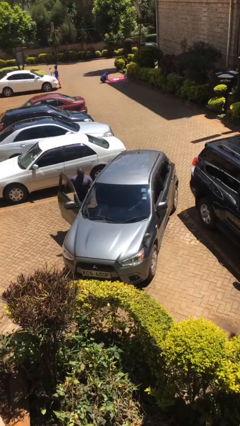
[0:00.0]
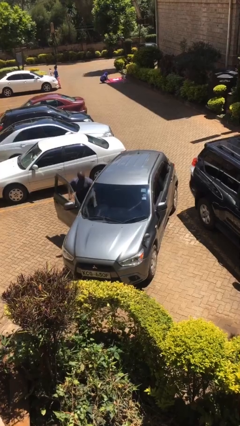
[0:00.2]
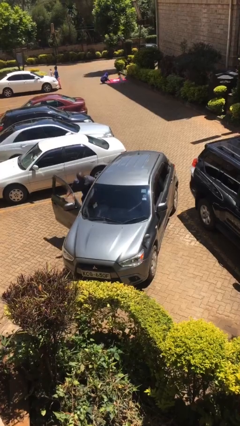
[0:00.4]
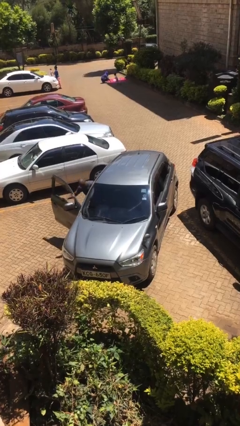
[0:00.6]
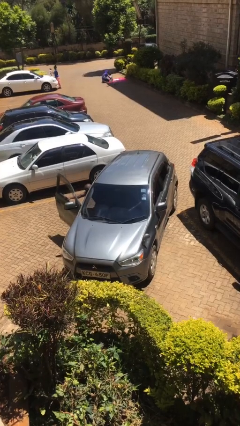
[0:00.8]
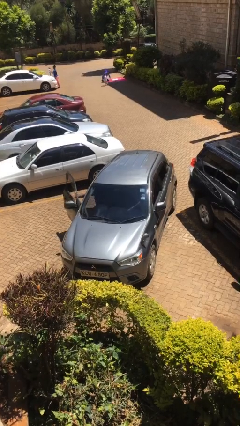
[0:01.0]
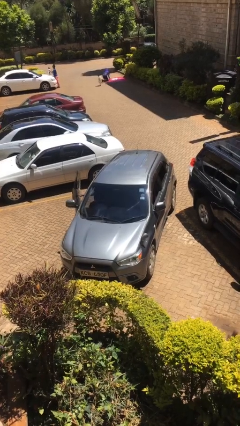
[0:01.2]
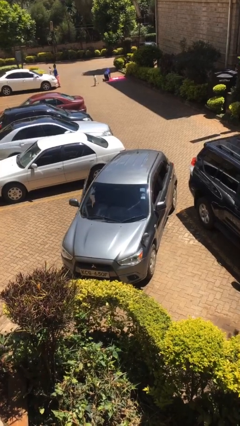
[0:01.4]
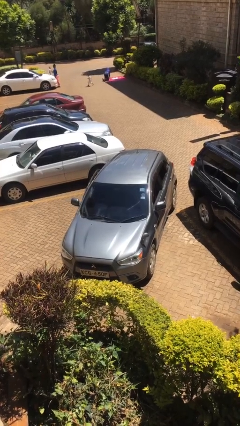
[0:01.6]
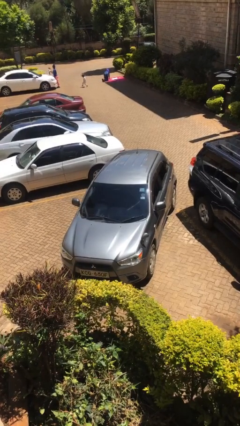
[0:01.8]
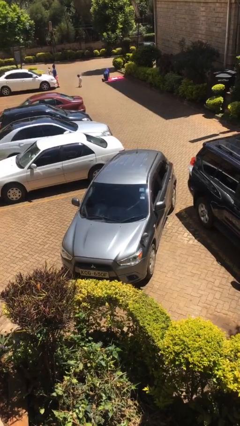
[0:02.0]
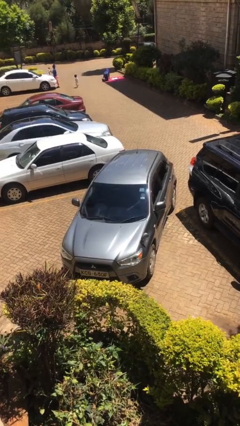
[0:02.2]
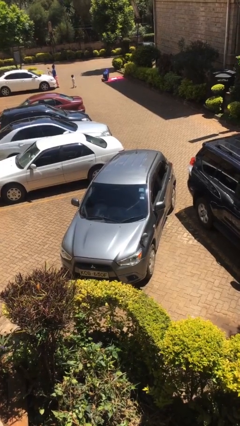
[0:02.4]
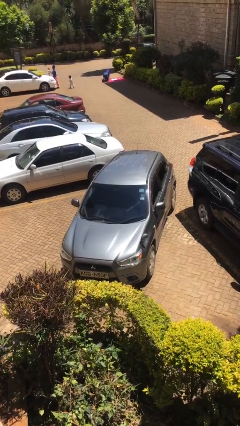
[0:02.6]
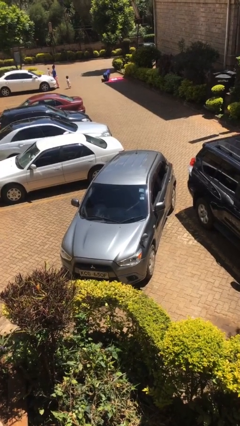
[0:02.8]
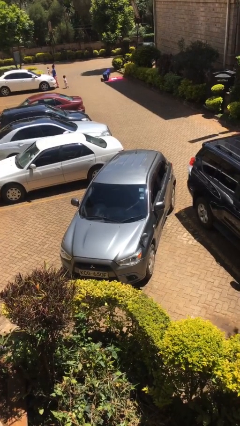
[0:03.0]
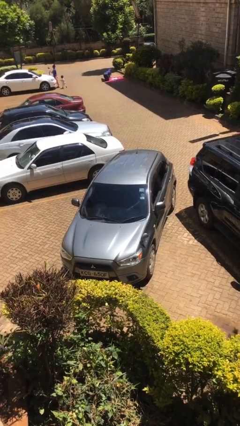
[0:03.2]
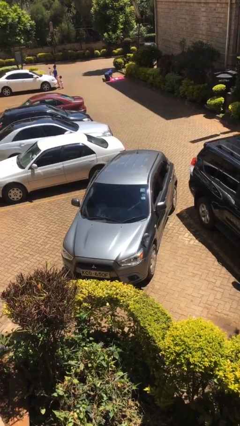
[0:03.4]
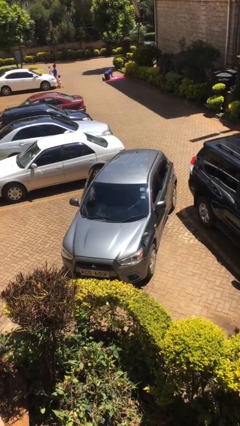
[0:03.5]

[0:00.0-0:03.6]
car picks up person

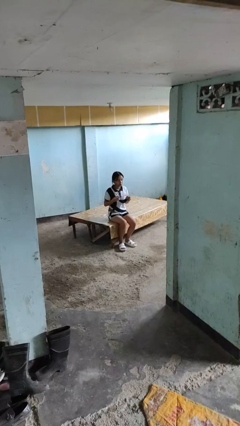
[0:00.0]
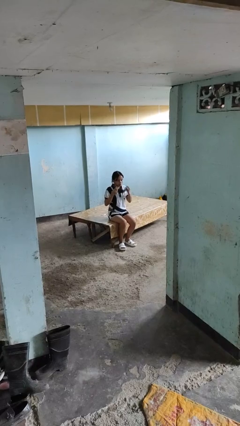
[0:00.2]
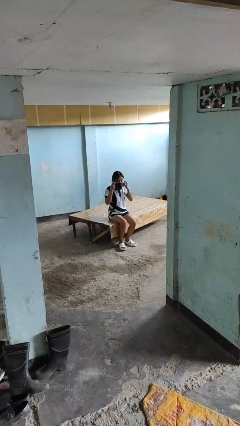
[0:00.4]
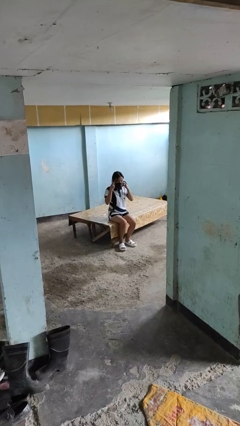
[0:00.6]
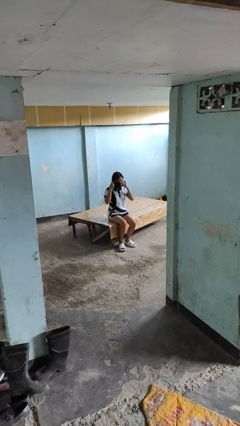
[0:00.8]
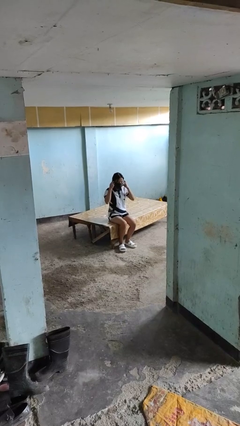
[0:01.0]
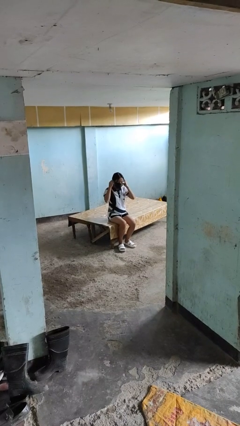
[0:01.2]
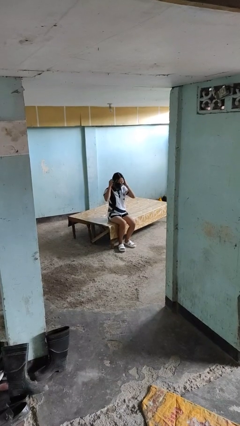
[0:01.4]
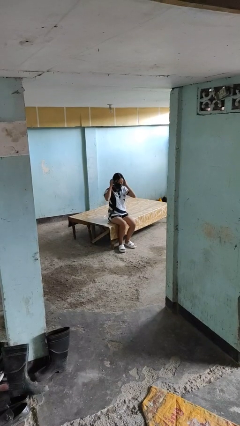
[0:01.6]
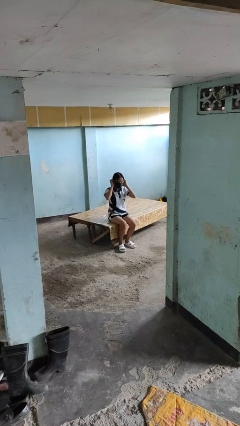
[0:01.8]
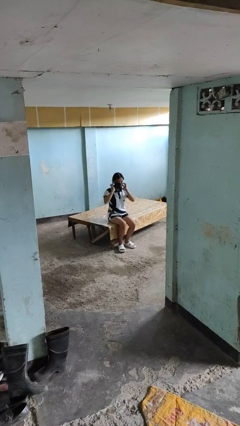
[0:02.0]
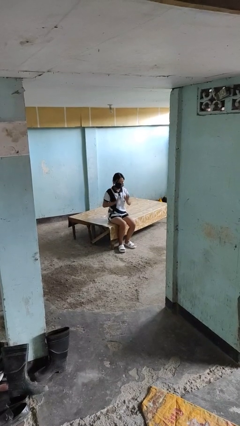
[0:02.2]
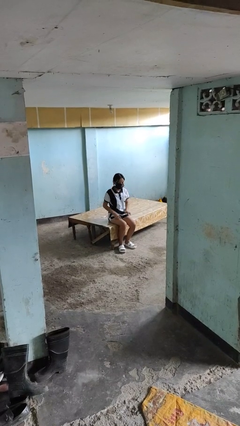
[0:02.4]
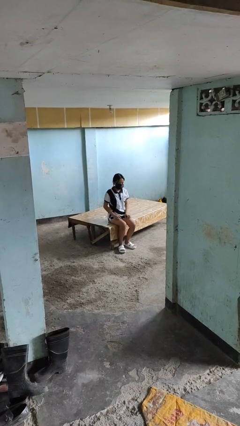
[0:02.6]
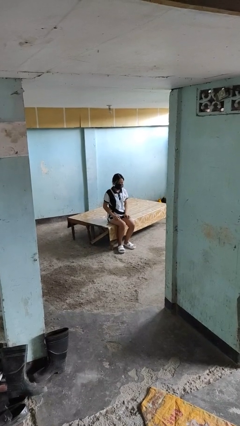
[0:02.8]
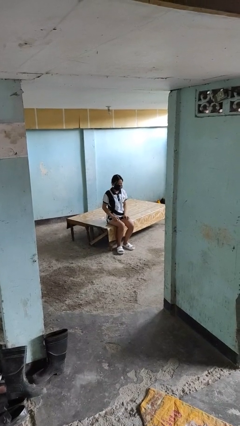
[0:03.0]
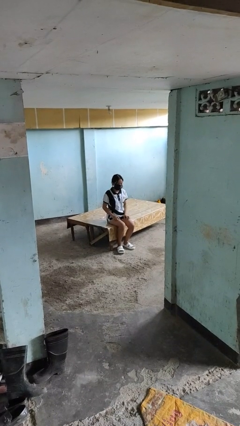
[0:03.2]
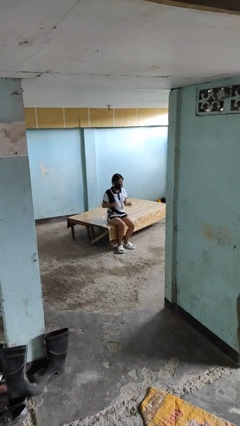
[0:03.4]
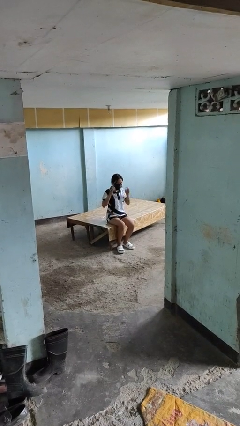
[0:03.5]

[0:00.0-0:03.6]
person puts on facemask

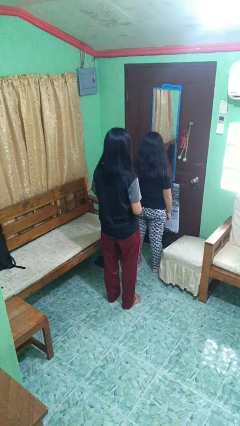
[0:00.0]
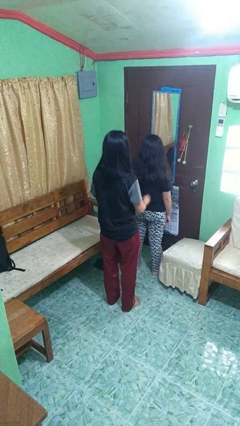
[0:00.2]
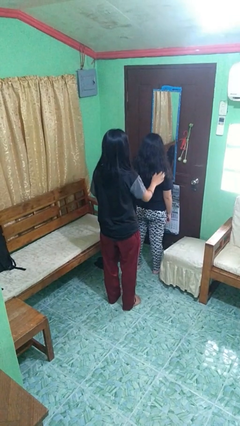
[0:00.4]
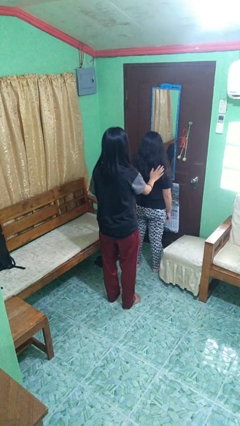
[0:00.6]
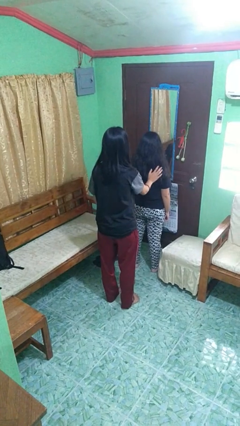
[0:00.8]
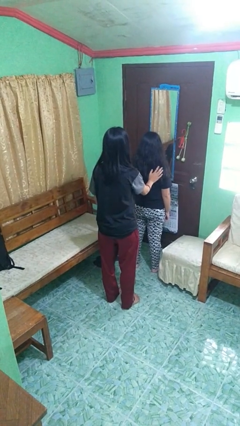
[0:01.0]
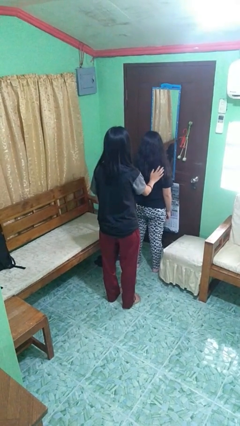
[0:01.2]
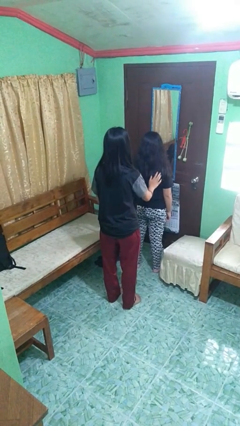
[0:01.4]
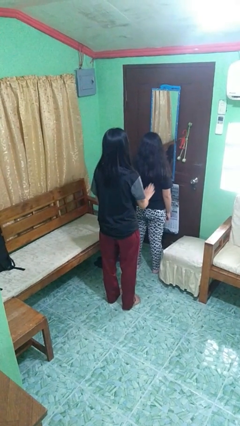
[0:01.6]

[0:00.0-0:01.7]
person touches back of person

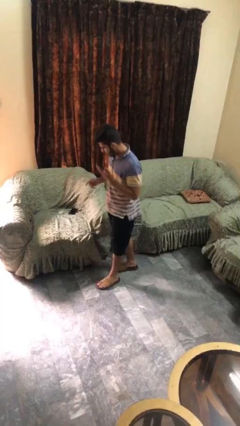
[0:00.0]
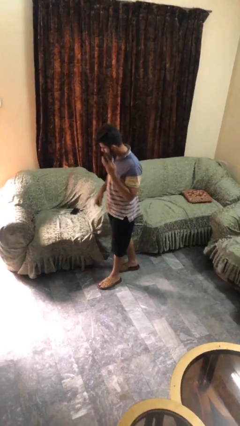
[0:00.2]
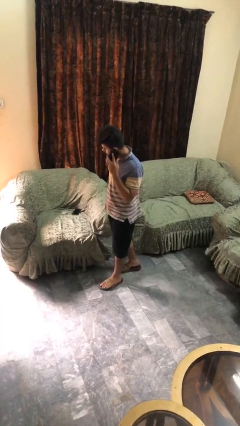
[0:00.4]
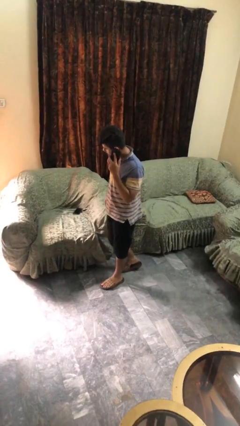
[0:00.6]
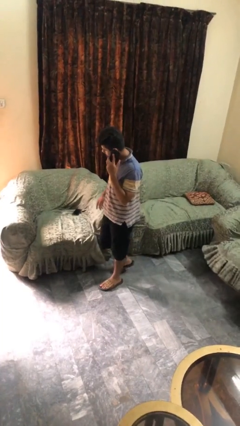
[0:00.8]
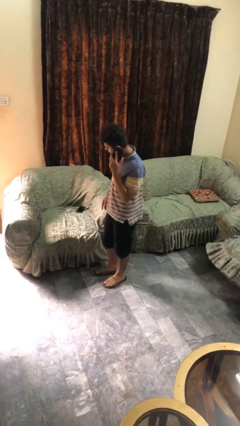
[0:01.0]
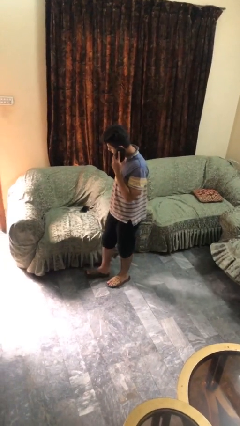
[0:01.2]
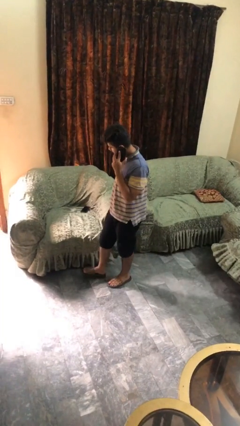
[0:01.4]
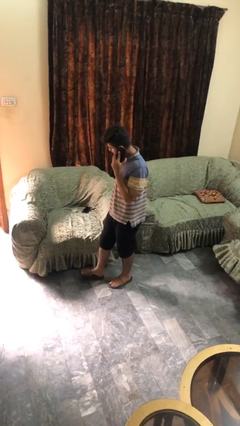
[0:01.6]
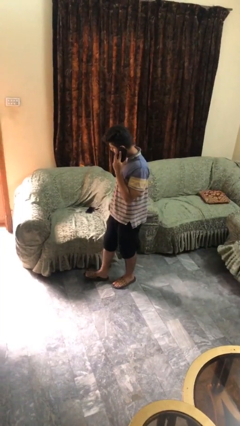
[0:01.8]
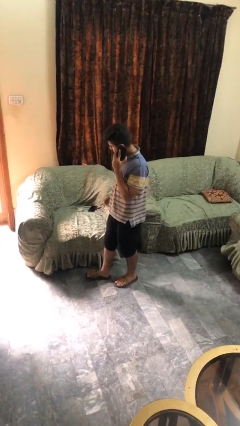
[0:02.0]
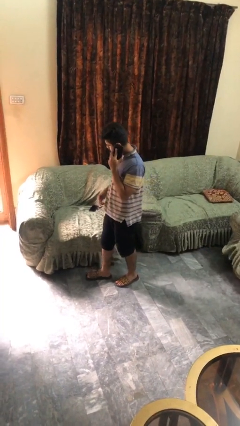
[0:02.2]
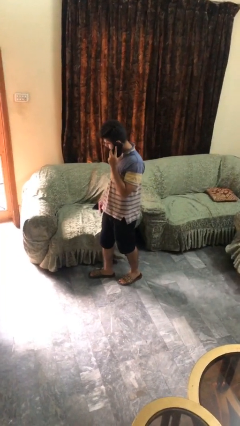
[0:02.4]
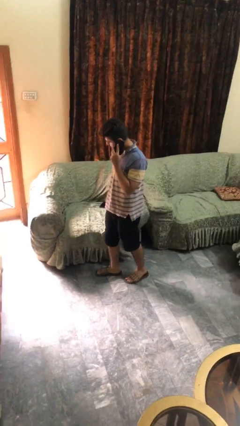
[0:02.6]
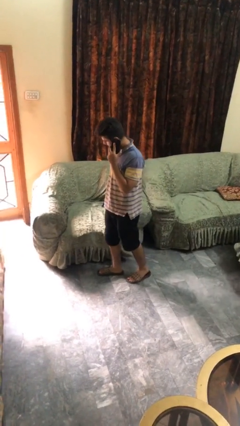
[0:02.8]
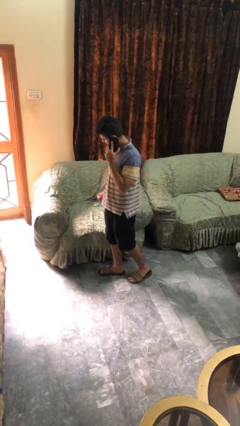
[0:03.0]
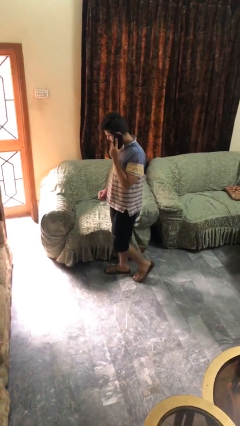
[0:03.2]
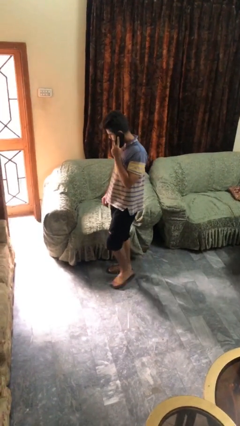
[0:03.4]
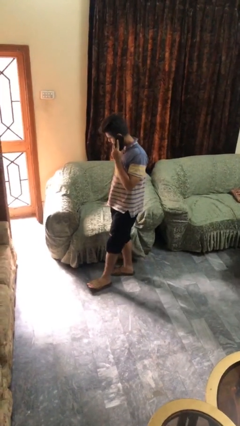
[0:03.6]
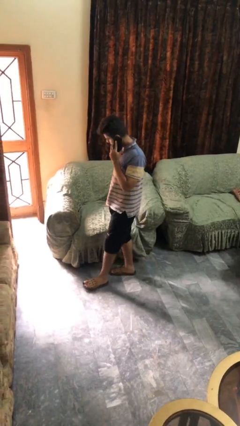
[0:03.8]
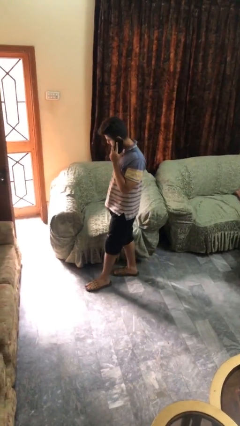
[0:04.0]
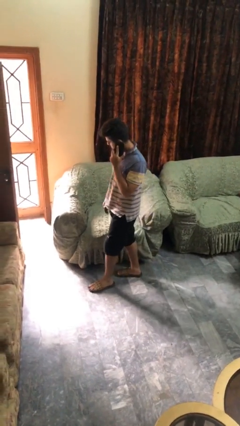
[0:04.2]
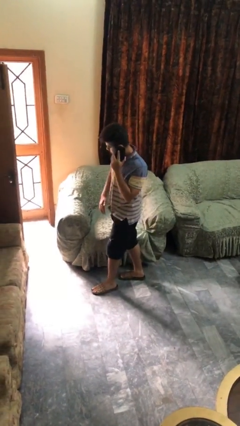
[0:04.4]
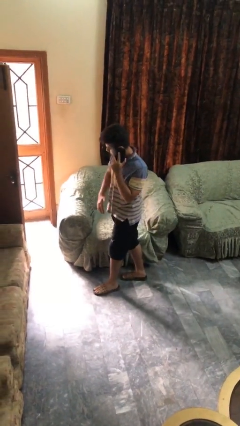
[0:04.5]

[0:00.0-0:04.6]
person talks on phone

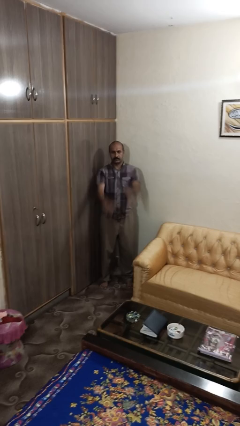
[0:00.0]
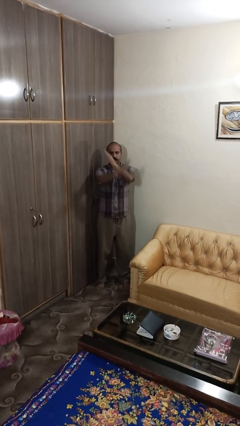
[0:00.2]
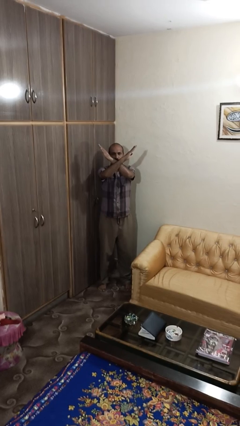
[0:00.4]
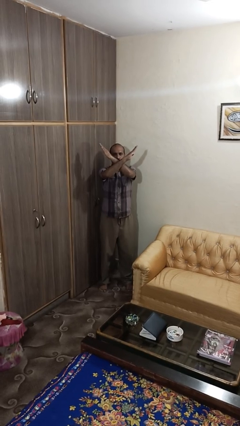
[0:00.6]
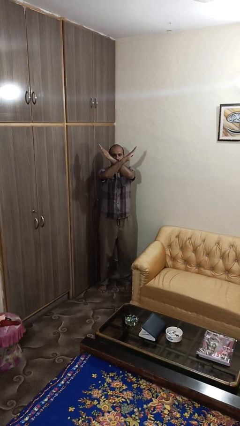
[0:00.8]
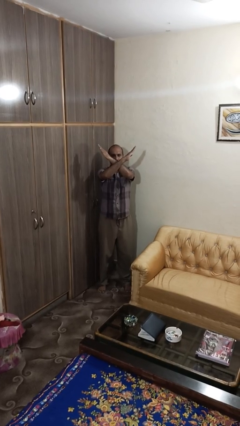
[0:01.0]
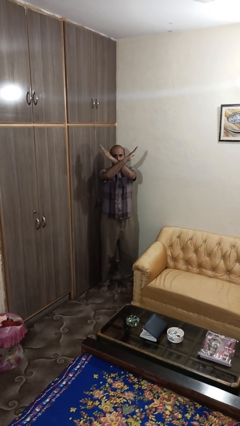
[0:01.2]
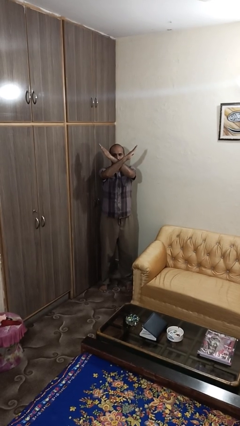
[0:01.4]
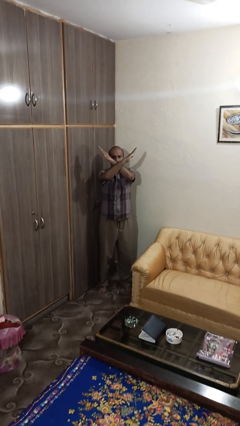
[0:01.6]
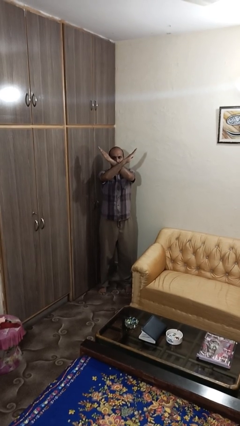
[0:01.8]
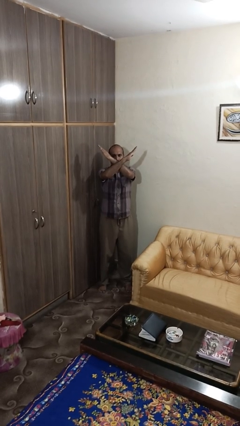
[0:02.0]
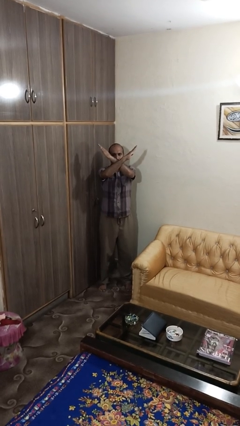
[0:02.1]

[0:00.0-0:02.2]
person gestures arms x

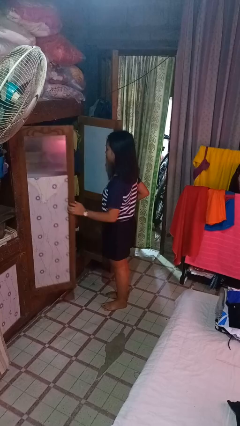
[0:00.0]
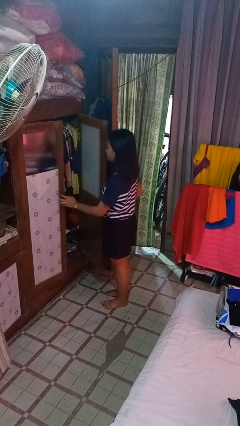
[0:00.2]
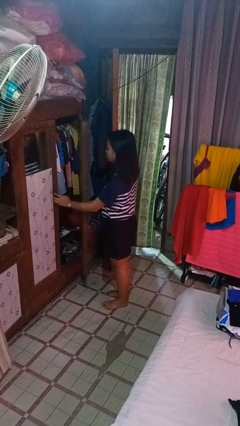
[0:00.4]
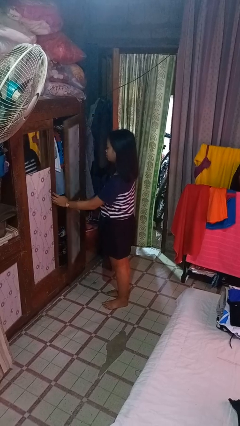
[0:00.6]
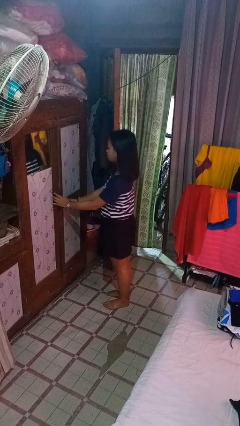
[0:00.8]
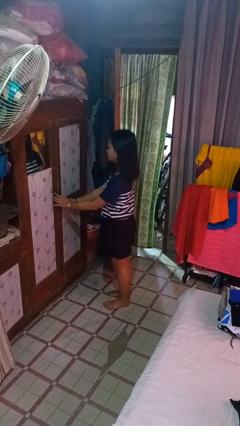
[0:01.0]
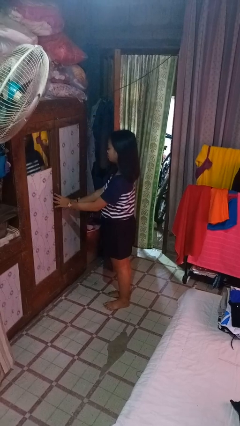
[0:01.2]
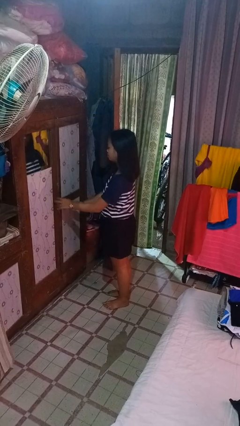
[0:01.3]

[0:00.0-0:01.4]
person closes closet door

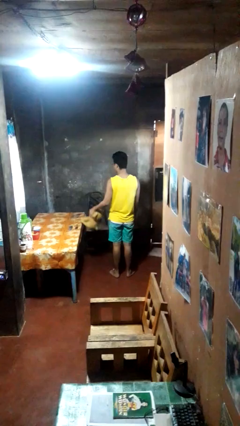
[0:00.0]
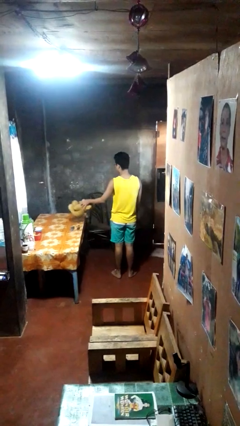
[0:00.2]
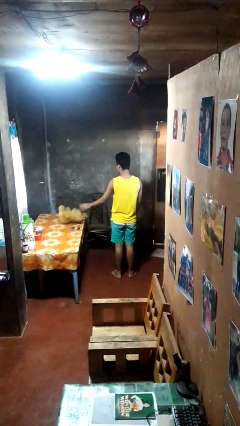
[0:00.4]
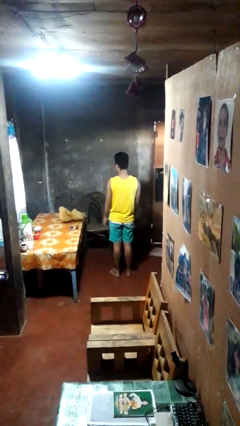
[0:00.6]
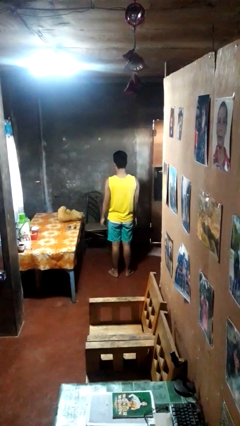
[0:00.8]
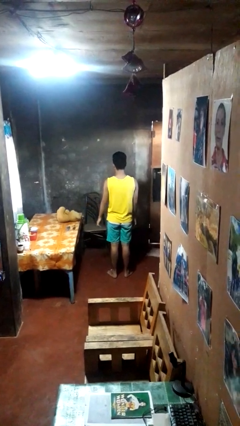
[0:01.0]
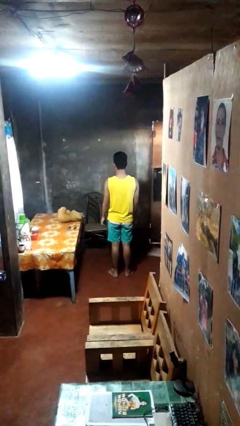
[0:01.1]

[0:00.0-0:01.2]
person throws object on table
